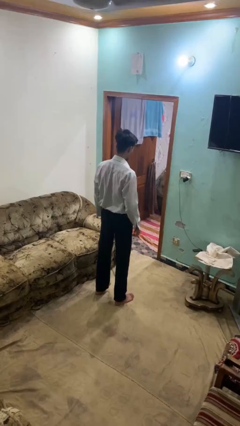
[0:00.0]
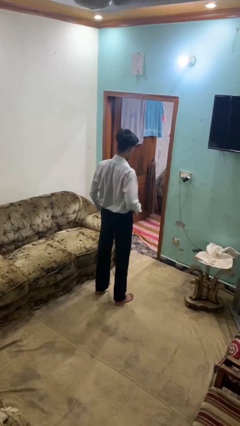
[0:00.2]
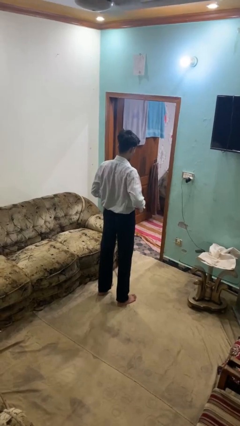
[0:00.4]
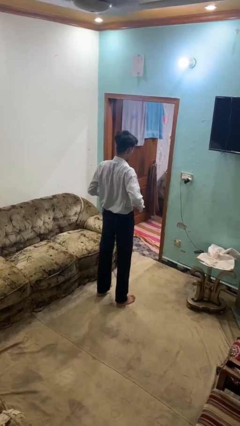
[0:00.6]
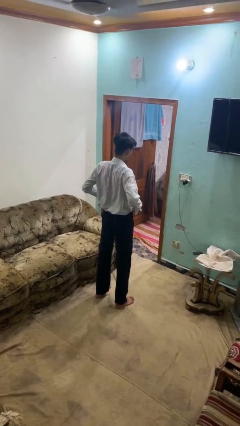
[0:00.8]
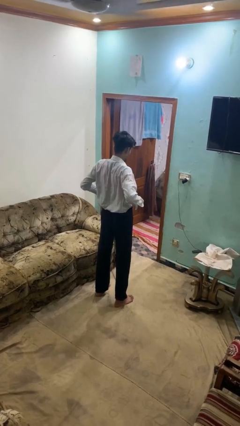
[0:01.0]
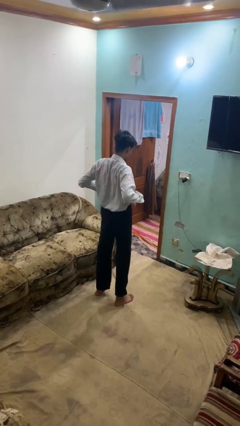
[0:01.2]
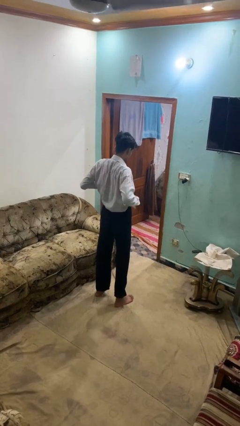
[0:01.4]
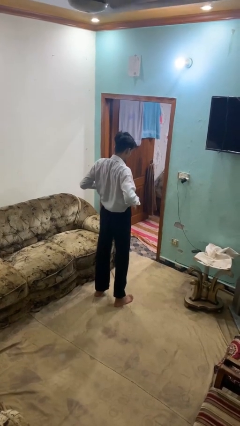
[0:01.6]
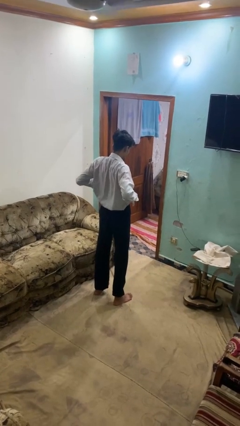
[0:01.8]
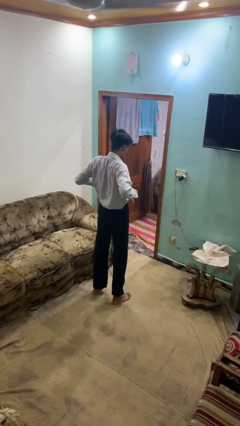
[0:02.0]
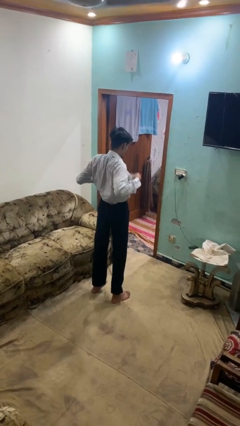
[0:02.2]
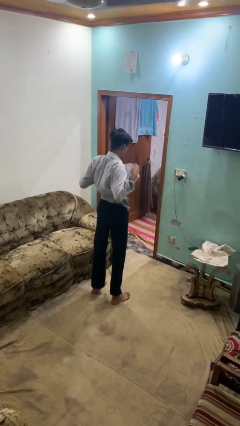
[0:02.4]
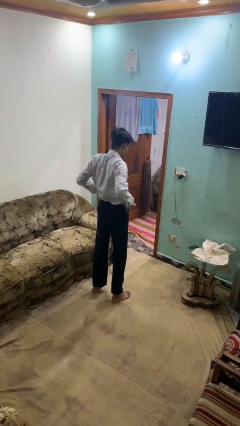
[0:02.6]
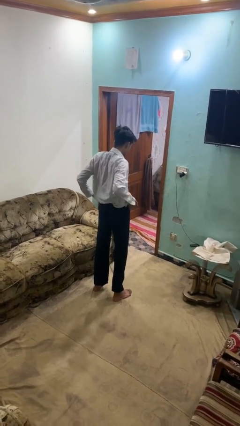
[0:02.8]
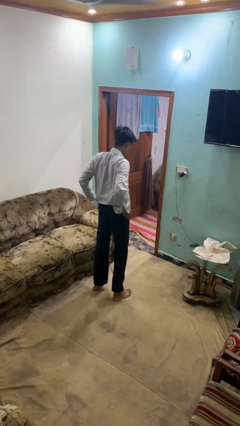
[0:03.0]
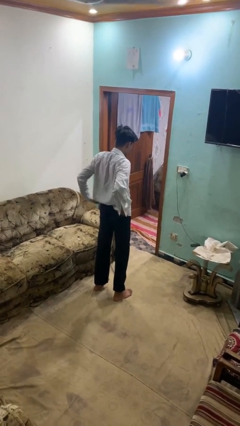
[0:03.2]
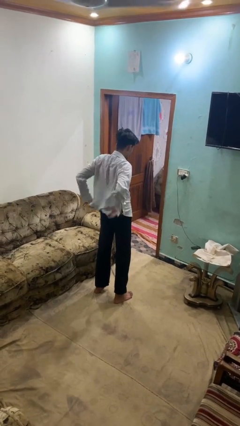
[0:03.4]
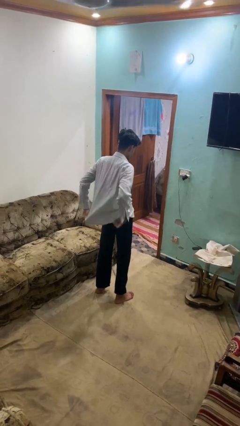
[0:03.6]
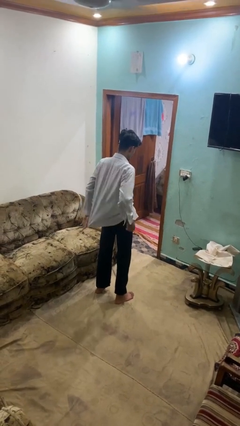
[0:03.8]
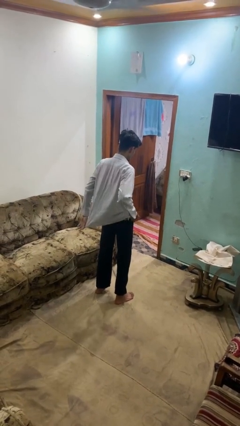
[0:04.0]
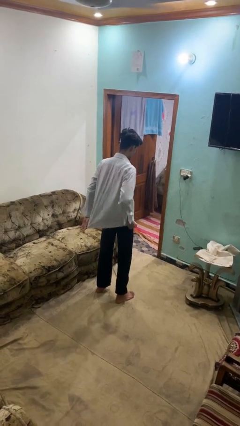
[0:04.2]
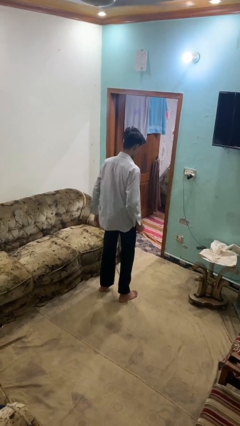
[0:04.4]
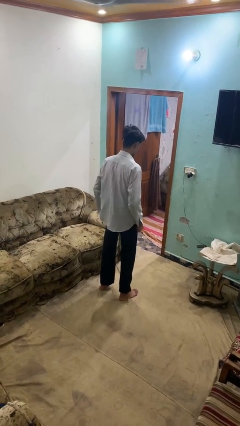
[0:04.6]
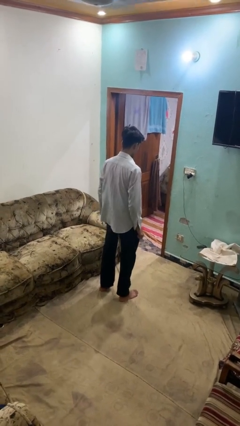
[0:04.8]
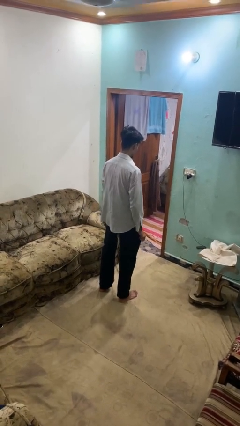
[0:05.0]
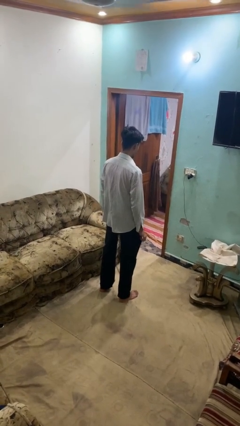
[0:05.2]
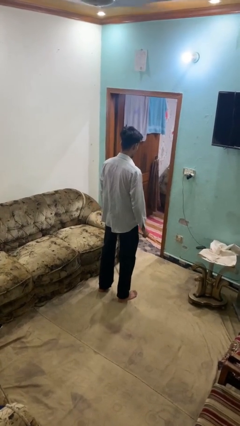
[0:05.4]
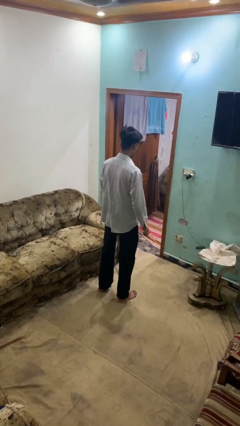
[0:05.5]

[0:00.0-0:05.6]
person untucks shirt

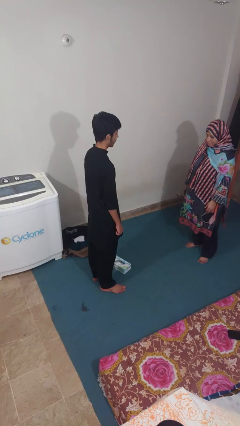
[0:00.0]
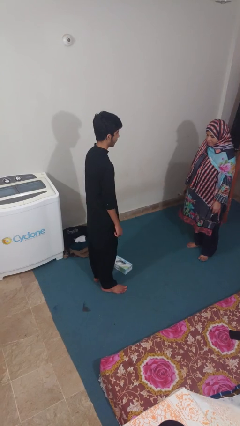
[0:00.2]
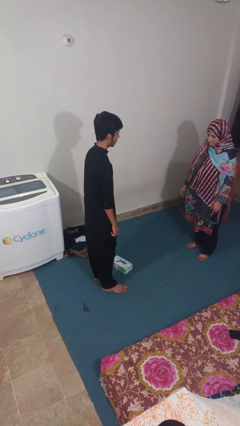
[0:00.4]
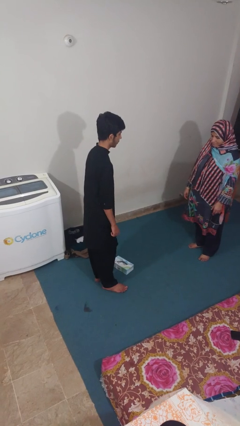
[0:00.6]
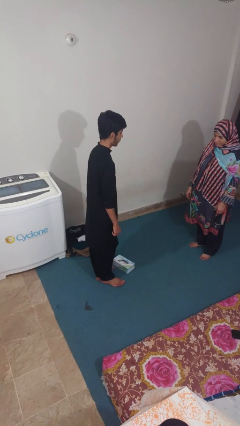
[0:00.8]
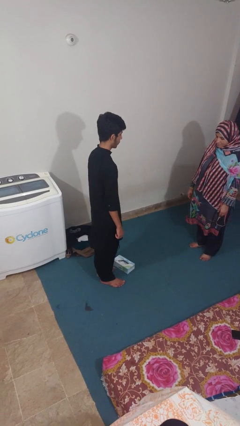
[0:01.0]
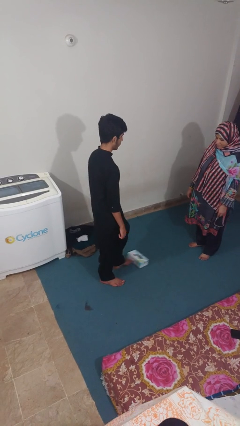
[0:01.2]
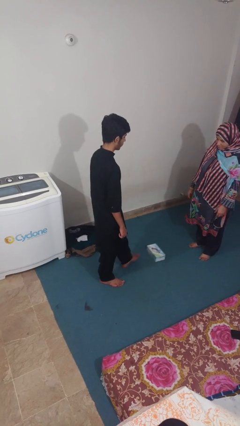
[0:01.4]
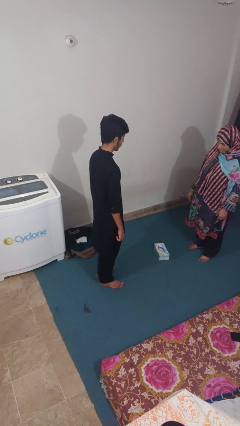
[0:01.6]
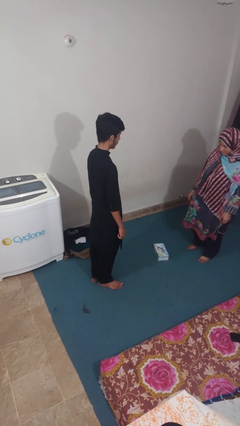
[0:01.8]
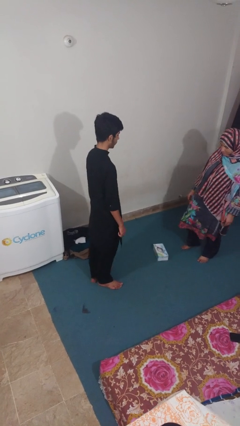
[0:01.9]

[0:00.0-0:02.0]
person kicks object to person

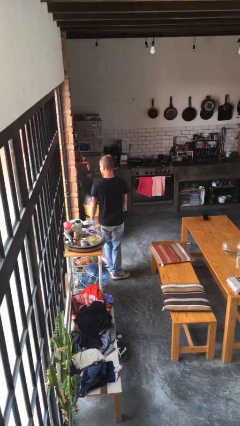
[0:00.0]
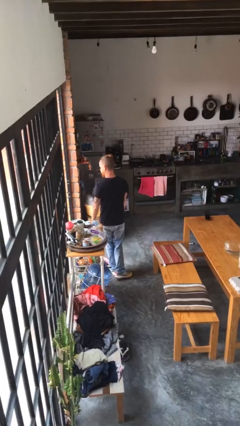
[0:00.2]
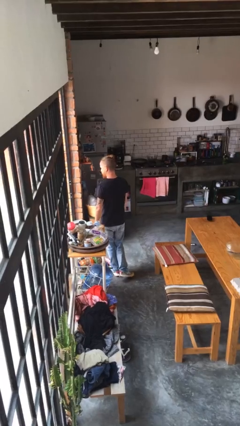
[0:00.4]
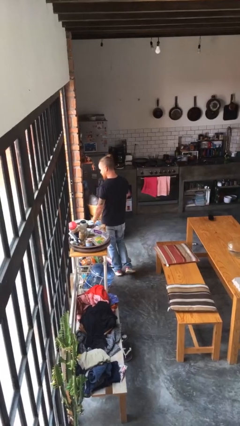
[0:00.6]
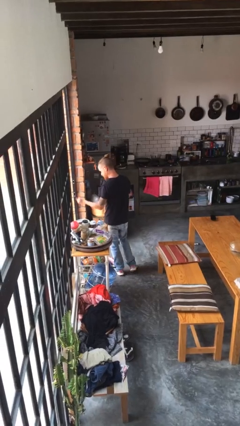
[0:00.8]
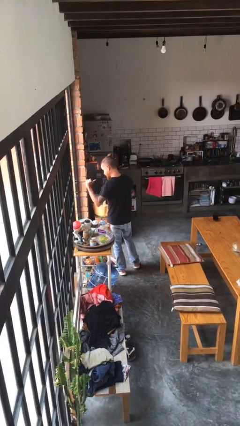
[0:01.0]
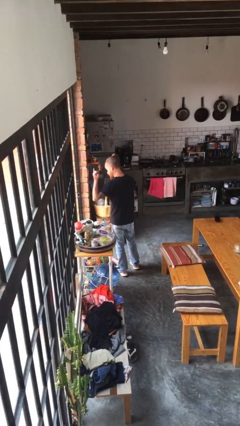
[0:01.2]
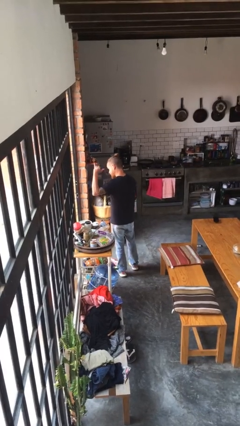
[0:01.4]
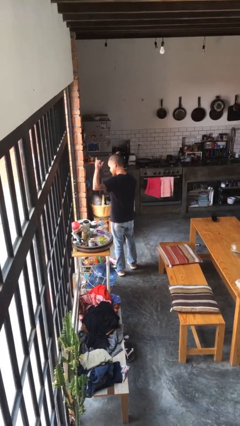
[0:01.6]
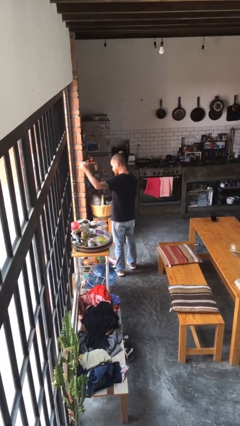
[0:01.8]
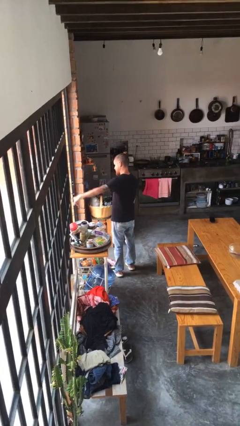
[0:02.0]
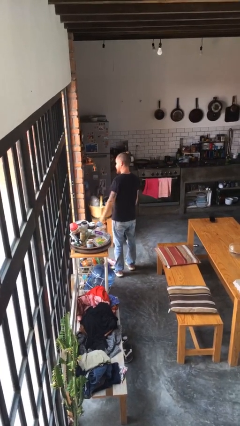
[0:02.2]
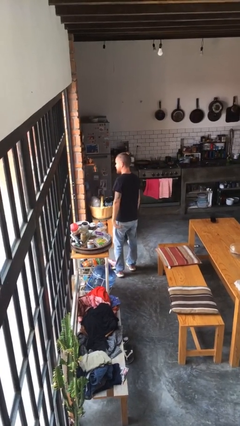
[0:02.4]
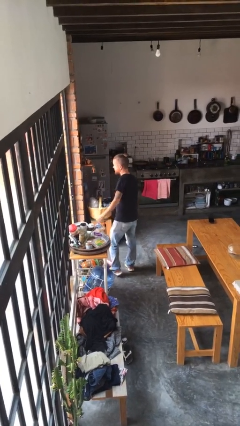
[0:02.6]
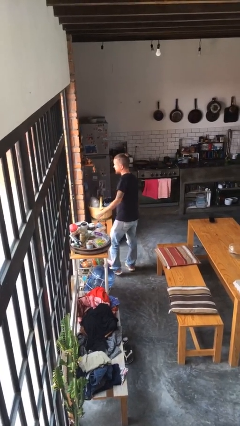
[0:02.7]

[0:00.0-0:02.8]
person gestures hang loose

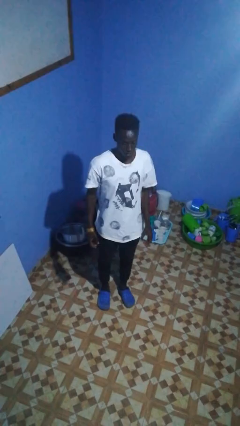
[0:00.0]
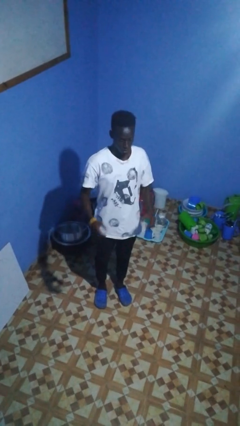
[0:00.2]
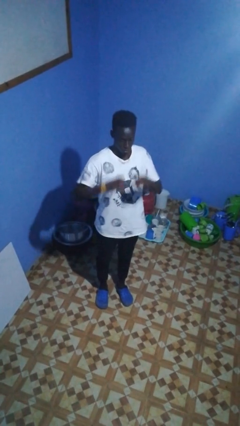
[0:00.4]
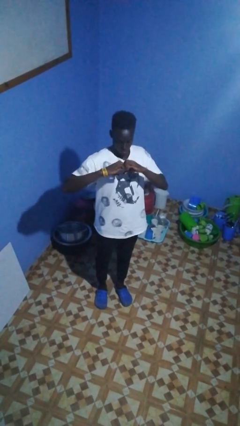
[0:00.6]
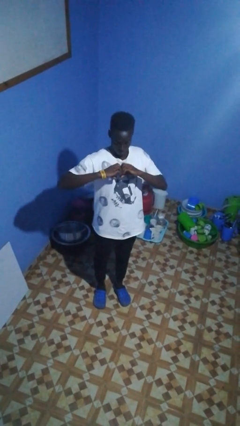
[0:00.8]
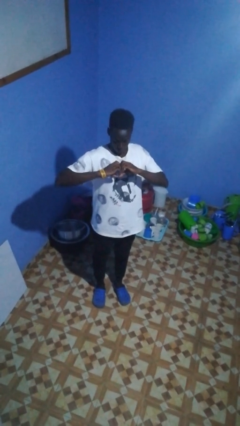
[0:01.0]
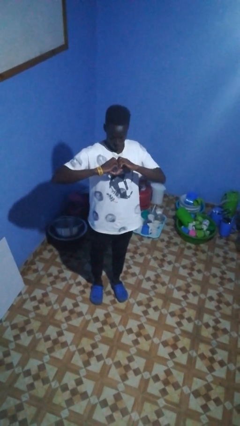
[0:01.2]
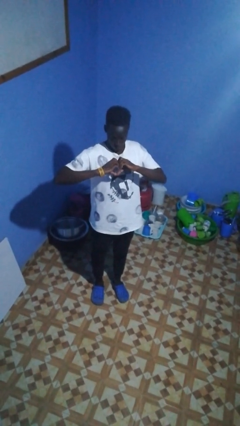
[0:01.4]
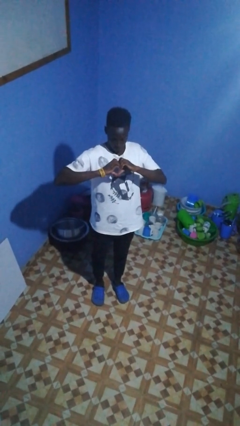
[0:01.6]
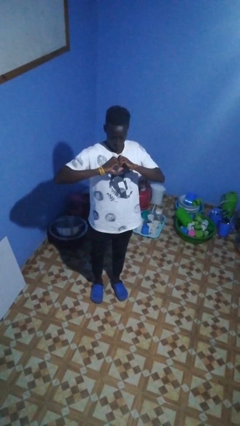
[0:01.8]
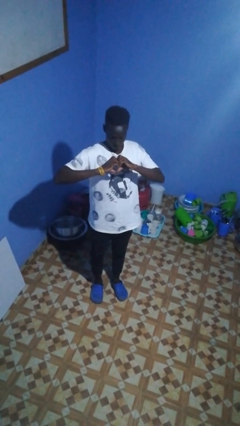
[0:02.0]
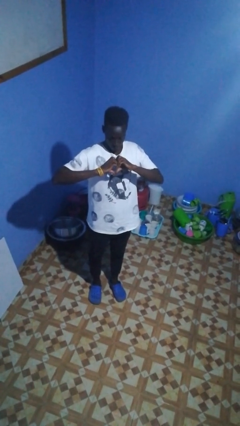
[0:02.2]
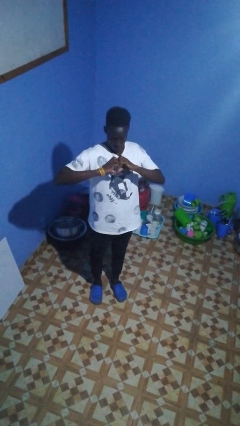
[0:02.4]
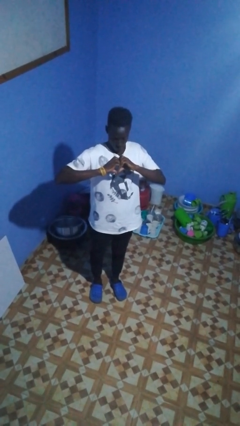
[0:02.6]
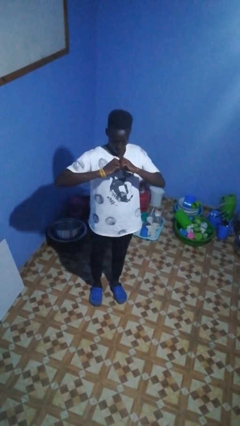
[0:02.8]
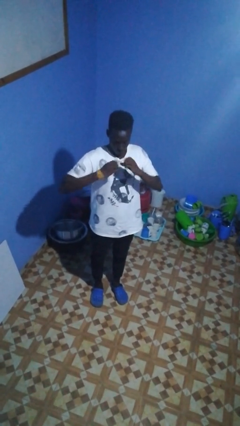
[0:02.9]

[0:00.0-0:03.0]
person gestures heart

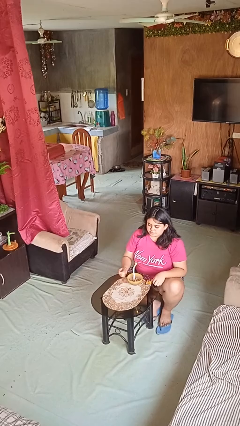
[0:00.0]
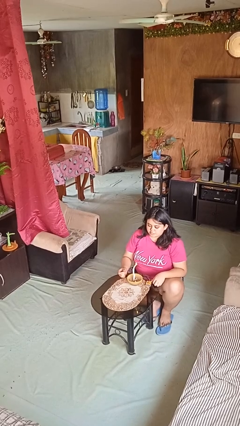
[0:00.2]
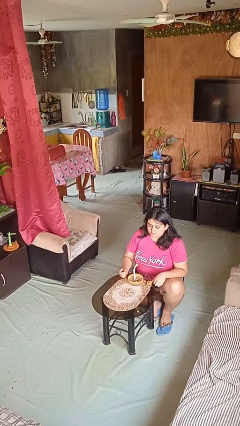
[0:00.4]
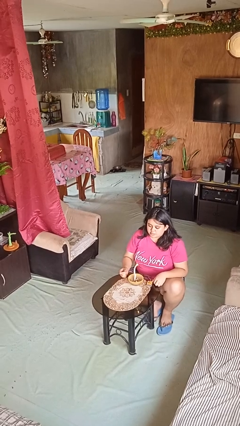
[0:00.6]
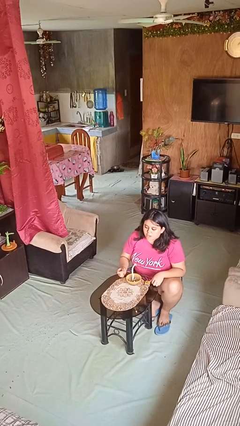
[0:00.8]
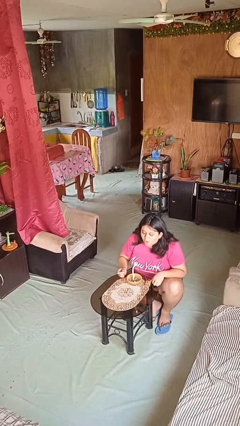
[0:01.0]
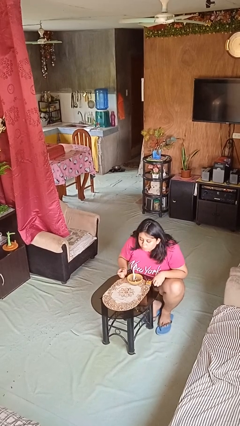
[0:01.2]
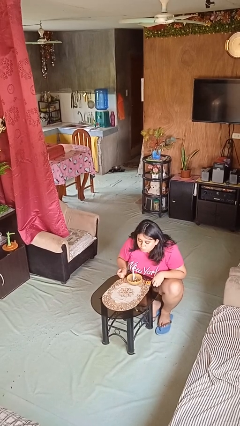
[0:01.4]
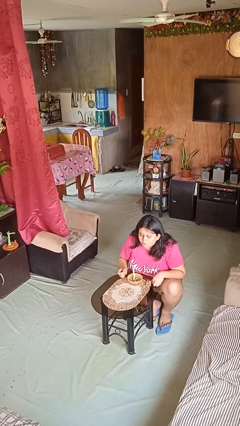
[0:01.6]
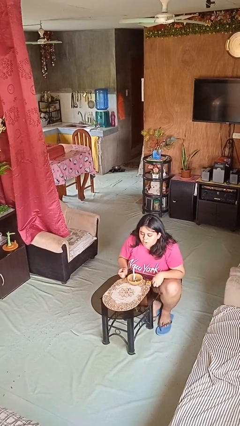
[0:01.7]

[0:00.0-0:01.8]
person extinguishes candle

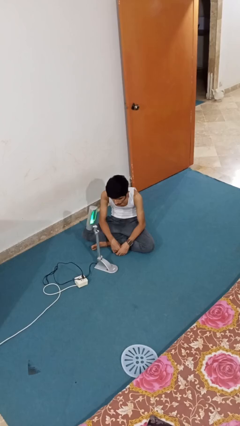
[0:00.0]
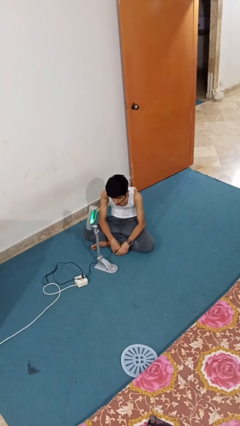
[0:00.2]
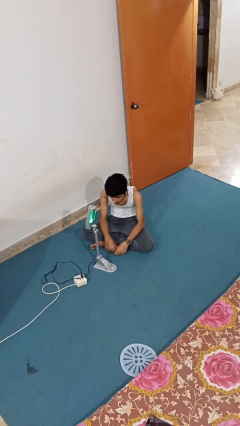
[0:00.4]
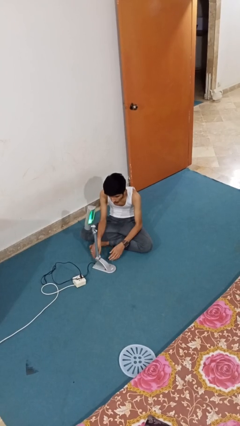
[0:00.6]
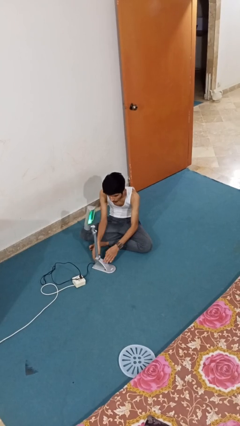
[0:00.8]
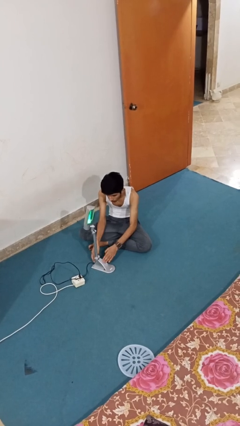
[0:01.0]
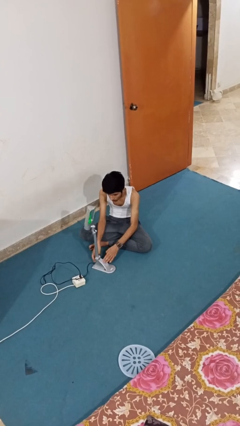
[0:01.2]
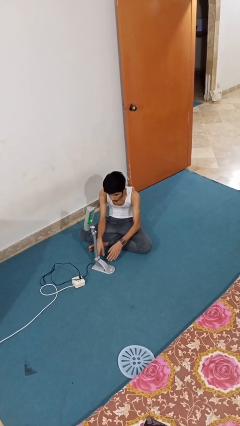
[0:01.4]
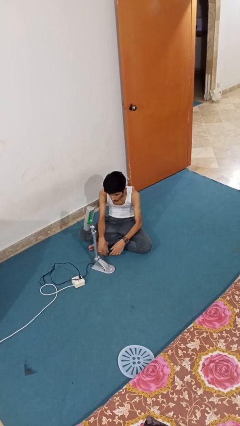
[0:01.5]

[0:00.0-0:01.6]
person turns off lamp

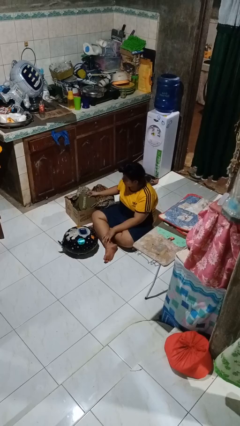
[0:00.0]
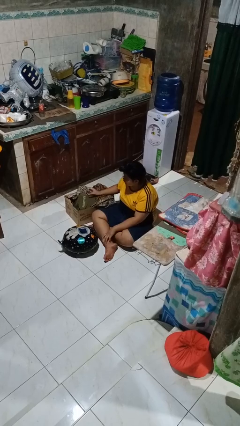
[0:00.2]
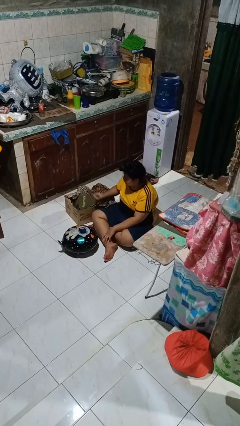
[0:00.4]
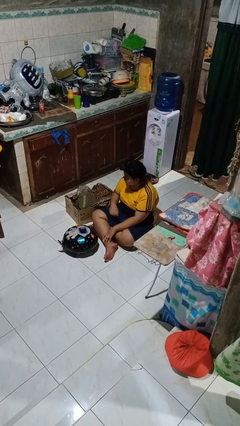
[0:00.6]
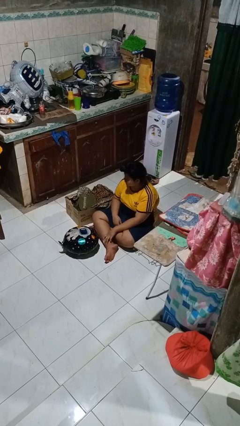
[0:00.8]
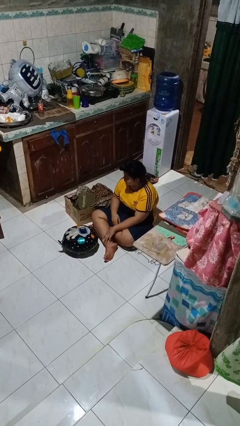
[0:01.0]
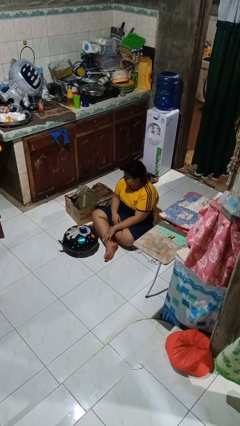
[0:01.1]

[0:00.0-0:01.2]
person puts object into box
